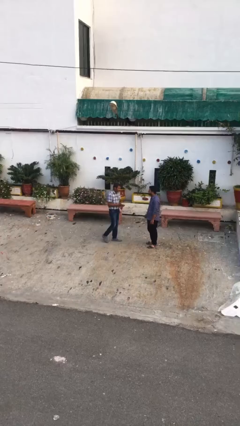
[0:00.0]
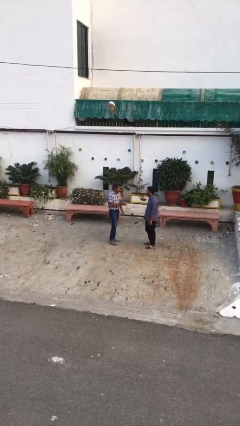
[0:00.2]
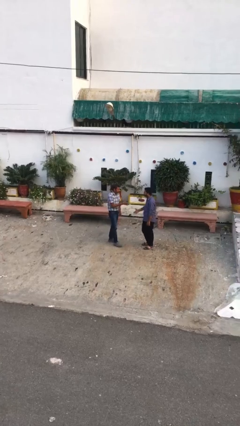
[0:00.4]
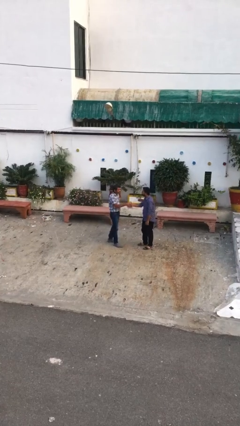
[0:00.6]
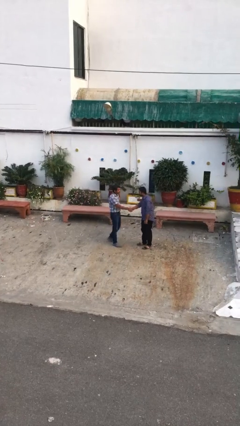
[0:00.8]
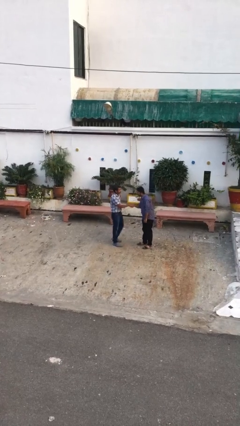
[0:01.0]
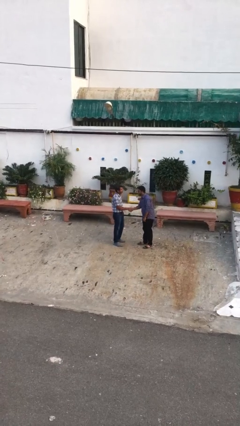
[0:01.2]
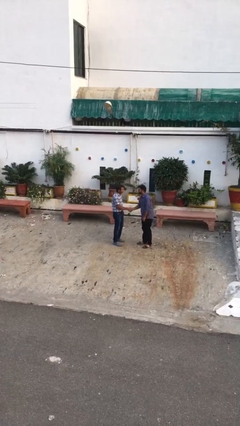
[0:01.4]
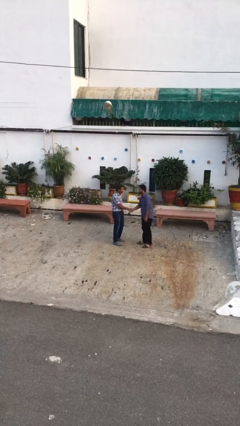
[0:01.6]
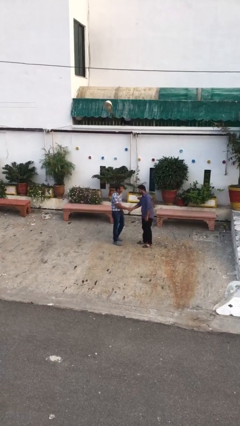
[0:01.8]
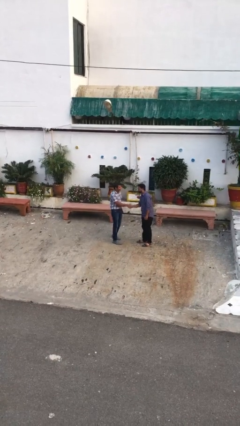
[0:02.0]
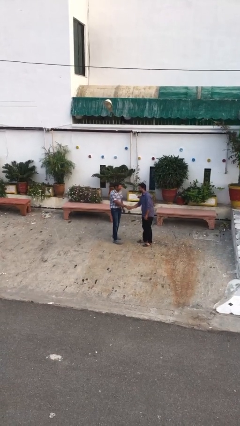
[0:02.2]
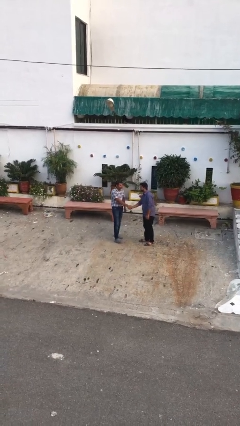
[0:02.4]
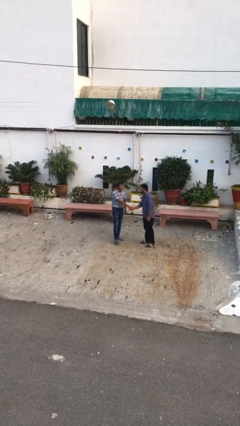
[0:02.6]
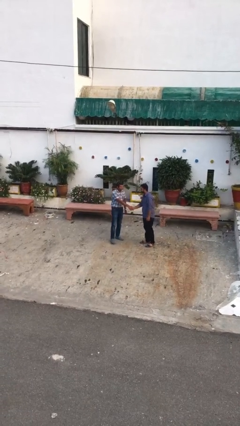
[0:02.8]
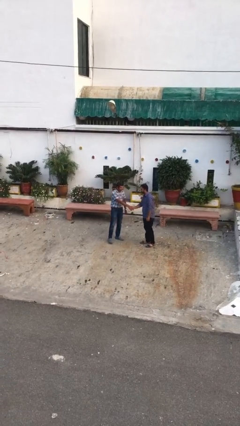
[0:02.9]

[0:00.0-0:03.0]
person shakes hand

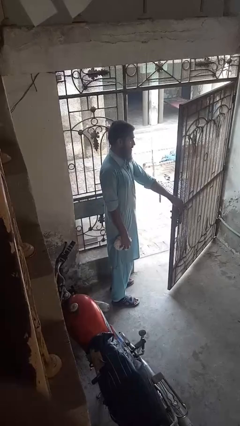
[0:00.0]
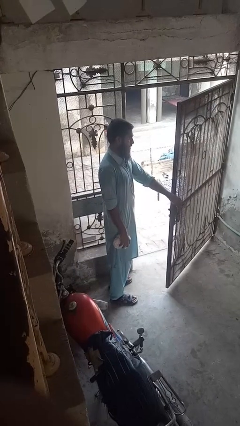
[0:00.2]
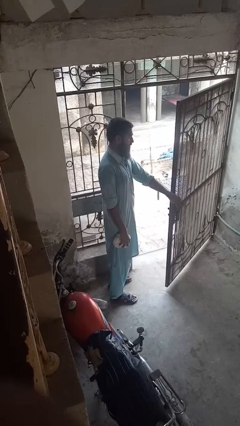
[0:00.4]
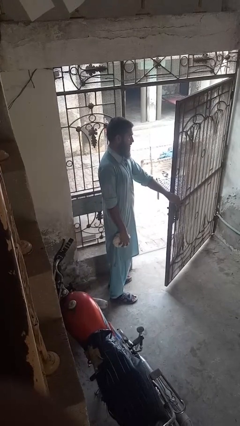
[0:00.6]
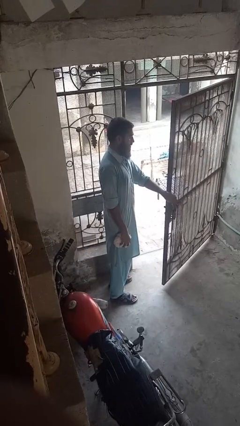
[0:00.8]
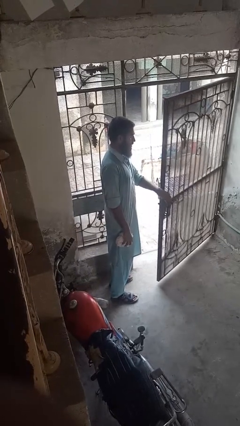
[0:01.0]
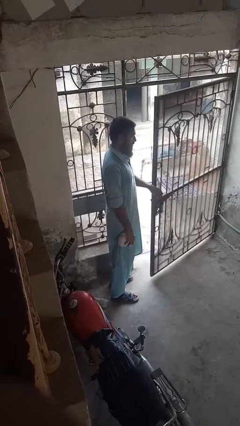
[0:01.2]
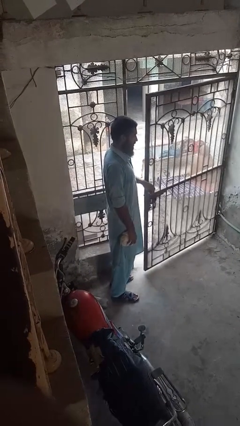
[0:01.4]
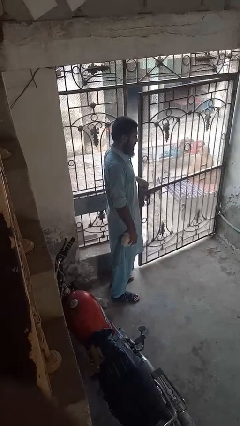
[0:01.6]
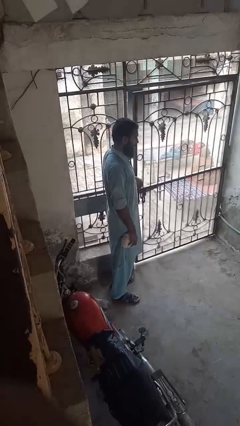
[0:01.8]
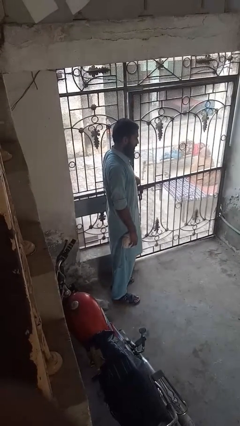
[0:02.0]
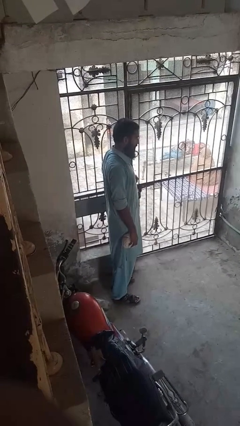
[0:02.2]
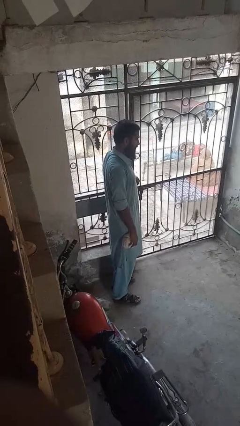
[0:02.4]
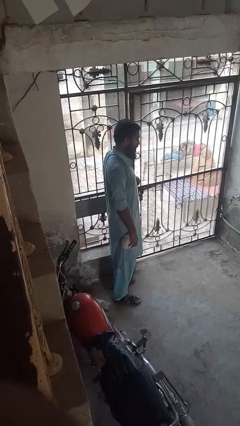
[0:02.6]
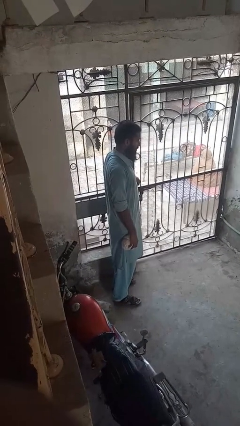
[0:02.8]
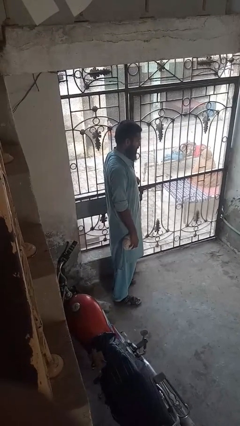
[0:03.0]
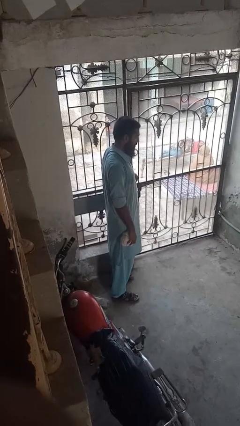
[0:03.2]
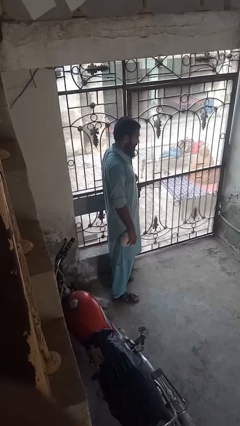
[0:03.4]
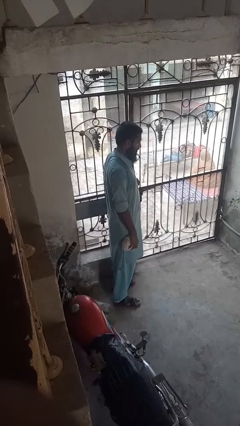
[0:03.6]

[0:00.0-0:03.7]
person closes gate

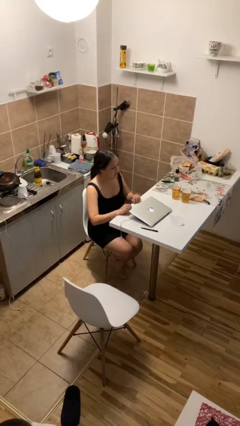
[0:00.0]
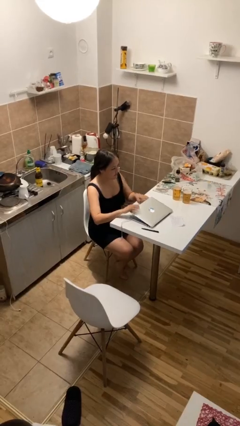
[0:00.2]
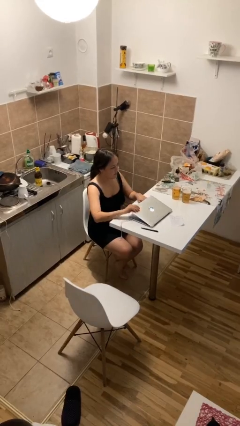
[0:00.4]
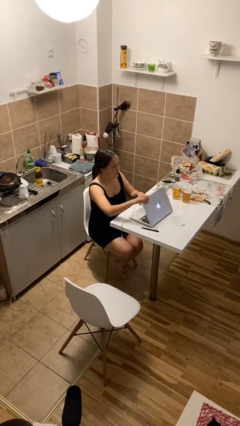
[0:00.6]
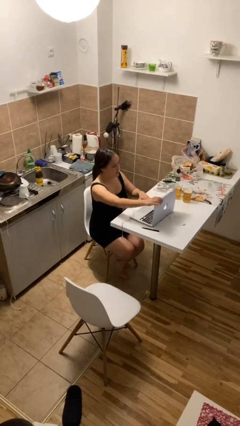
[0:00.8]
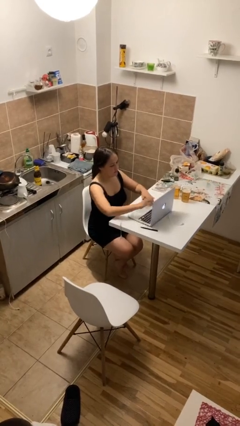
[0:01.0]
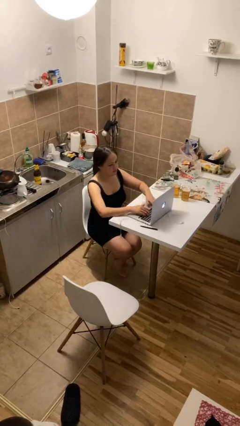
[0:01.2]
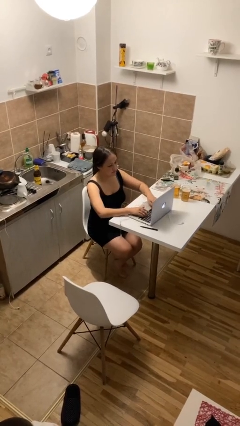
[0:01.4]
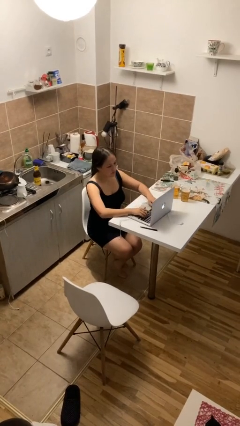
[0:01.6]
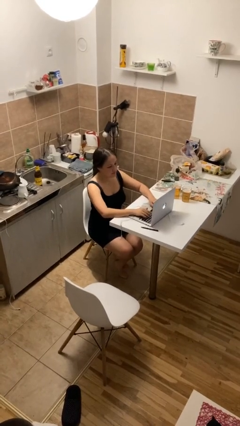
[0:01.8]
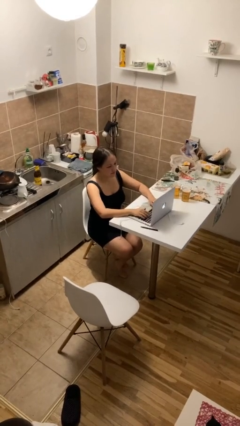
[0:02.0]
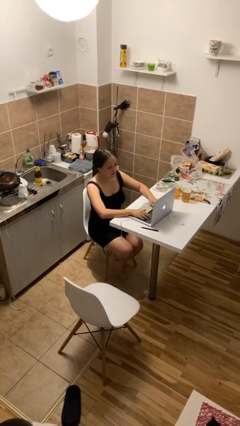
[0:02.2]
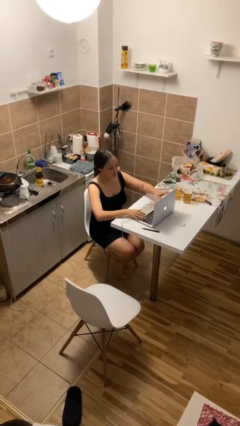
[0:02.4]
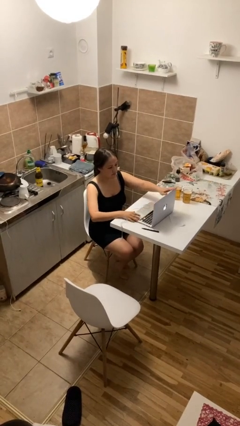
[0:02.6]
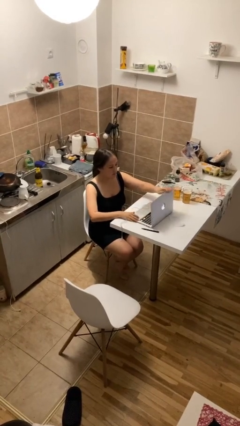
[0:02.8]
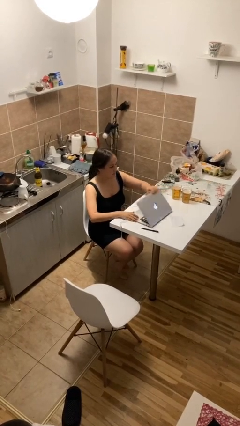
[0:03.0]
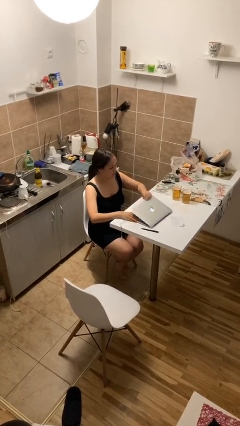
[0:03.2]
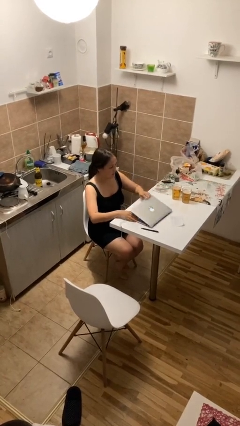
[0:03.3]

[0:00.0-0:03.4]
person interacts with laptop

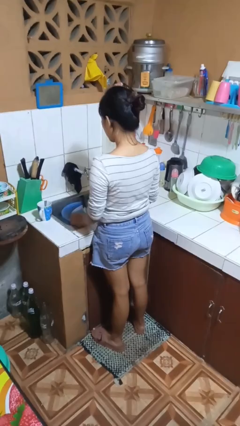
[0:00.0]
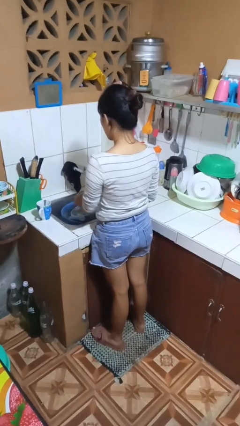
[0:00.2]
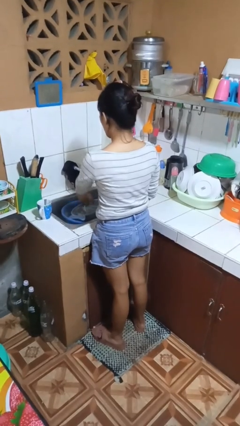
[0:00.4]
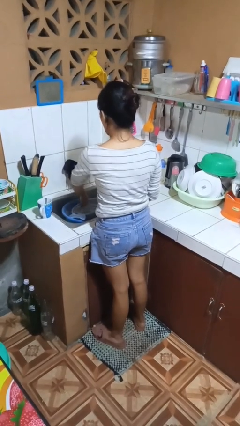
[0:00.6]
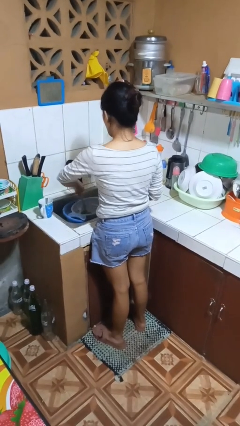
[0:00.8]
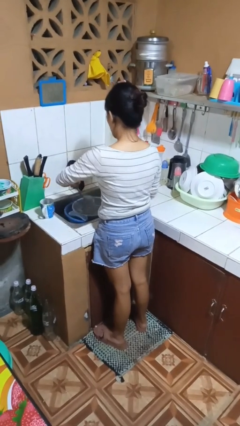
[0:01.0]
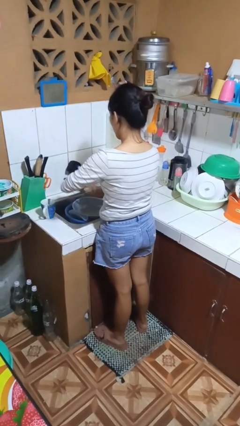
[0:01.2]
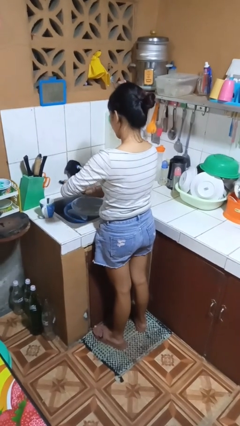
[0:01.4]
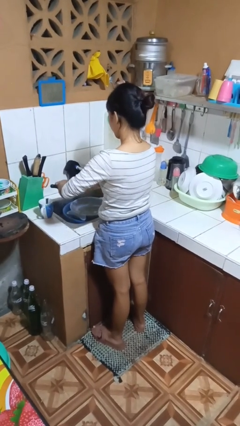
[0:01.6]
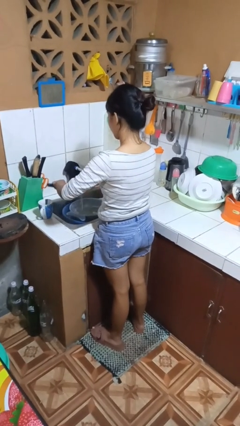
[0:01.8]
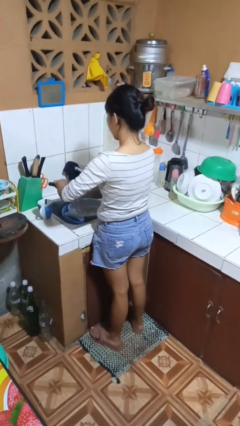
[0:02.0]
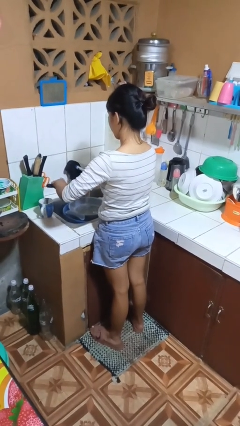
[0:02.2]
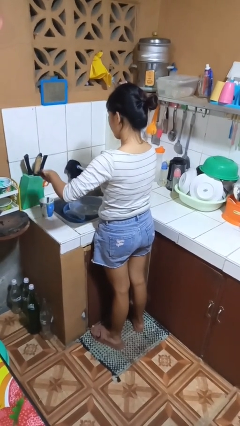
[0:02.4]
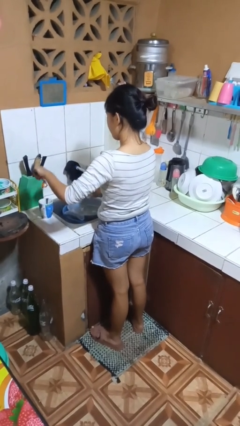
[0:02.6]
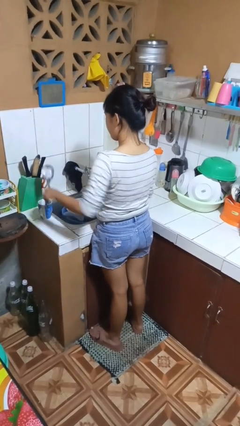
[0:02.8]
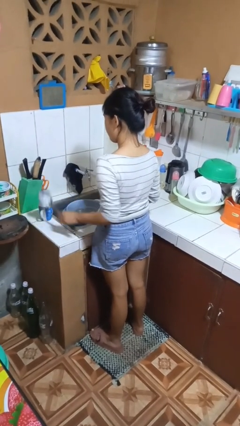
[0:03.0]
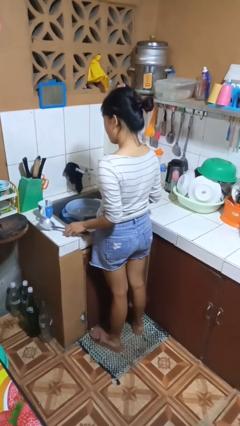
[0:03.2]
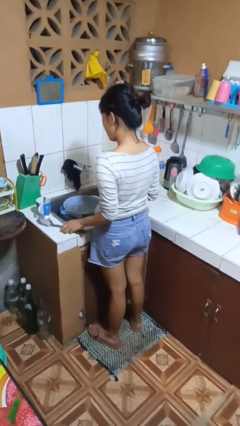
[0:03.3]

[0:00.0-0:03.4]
person washes dish

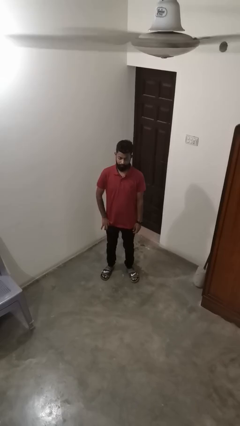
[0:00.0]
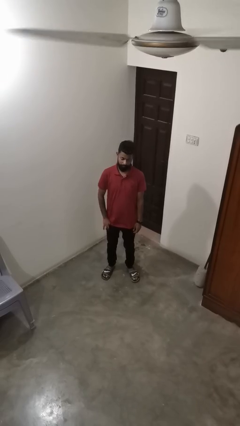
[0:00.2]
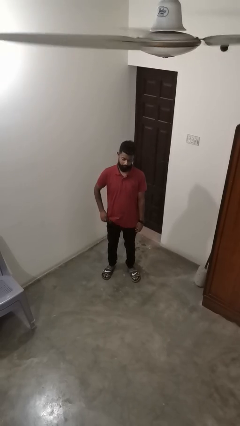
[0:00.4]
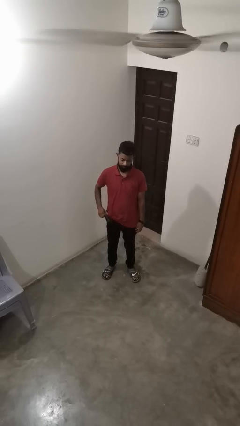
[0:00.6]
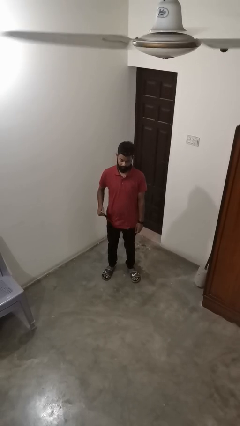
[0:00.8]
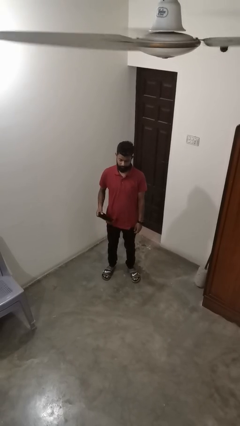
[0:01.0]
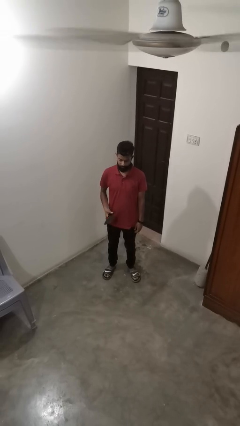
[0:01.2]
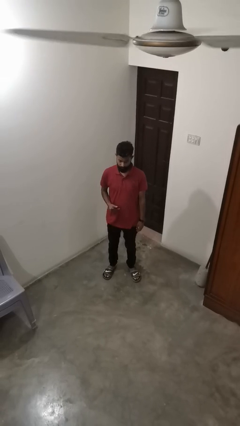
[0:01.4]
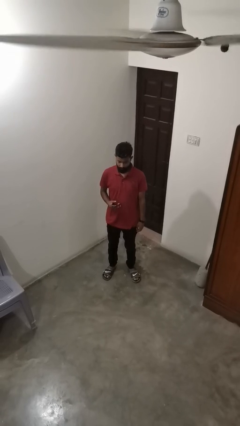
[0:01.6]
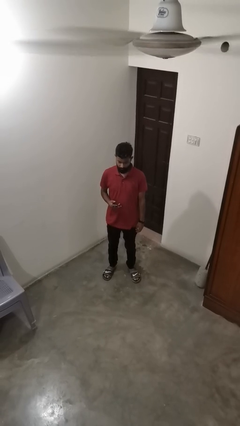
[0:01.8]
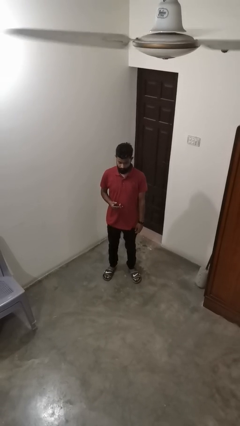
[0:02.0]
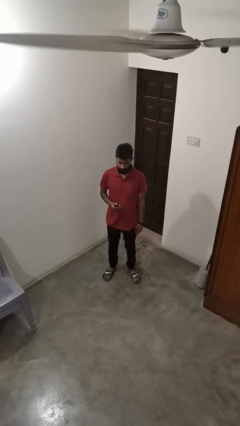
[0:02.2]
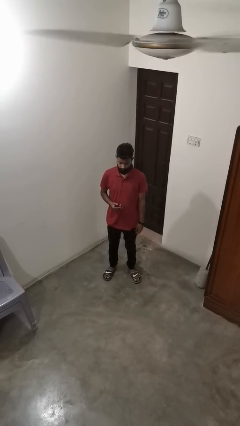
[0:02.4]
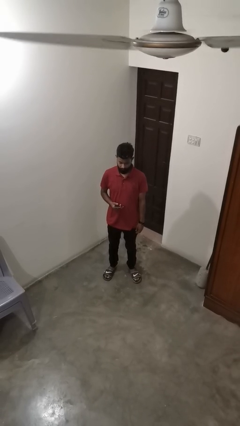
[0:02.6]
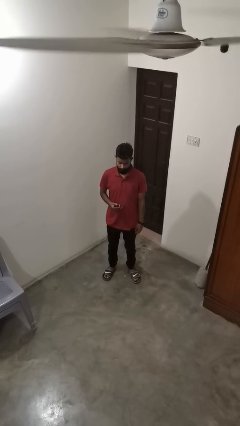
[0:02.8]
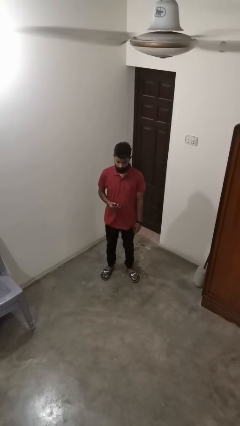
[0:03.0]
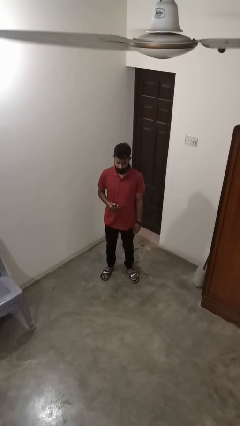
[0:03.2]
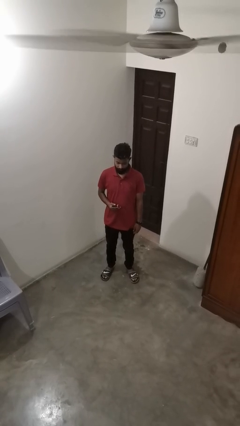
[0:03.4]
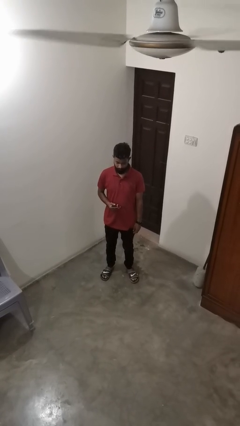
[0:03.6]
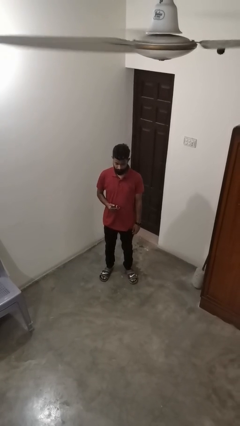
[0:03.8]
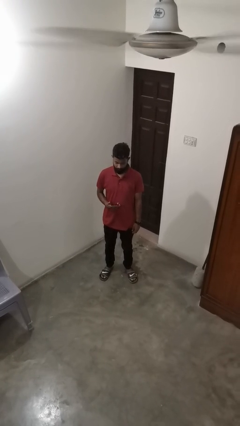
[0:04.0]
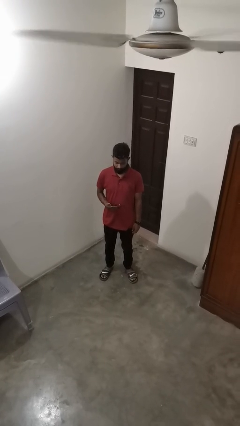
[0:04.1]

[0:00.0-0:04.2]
person takes phone from pocket
